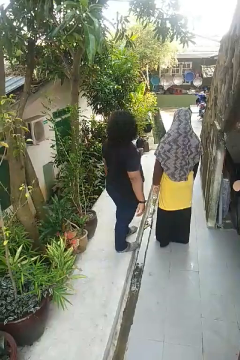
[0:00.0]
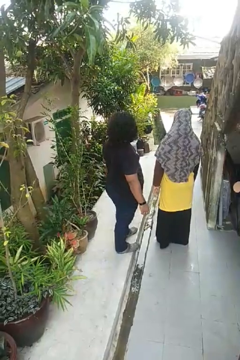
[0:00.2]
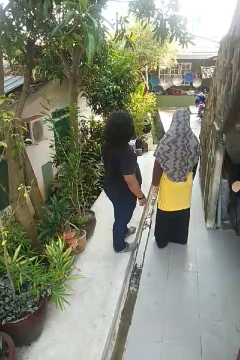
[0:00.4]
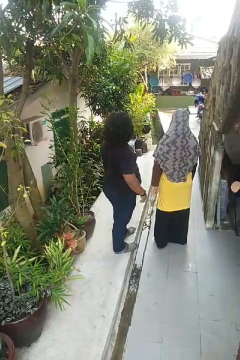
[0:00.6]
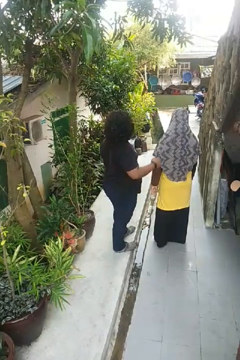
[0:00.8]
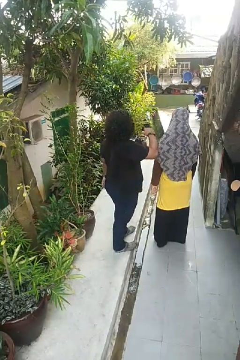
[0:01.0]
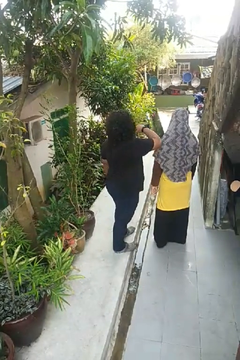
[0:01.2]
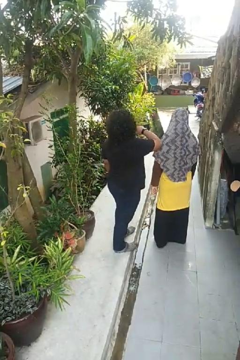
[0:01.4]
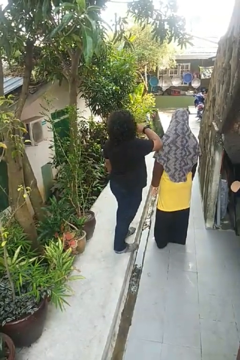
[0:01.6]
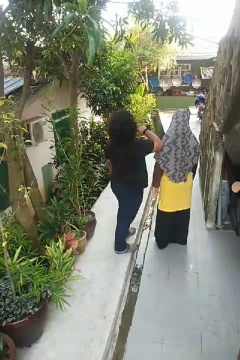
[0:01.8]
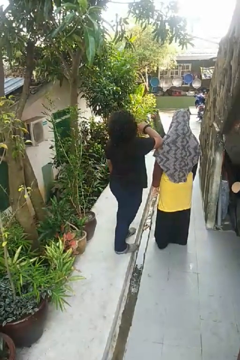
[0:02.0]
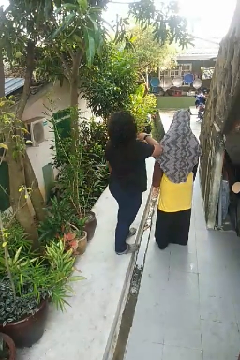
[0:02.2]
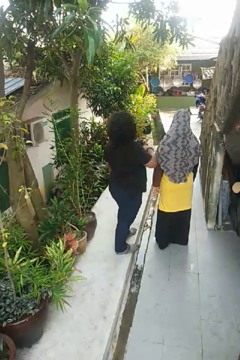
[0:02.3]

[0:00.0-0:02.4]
person nudges person with elbow

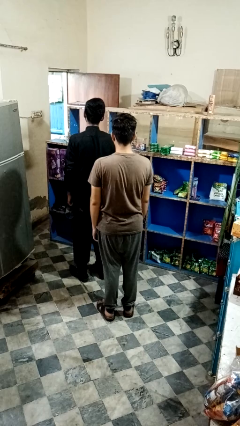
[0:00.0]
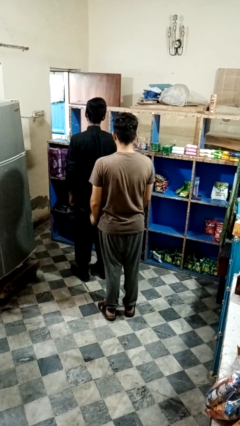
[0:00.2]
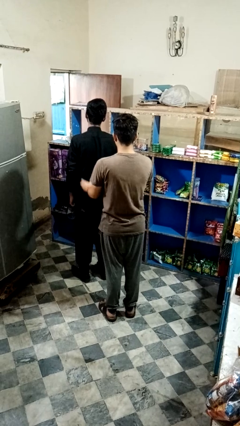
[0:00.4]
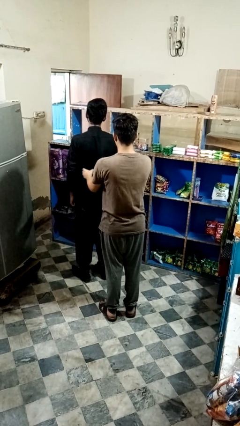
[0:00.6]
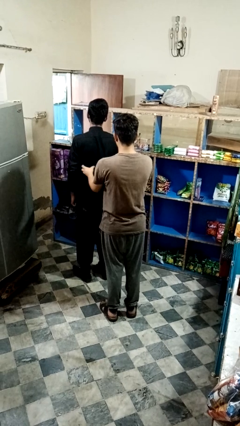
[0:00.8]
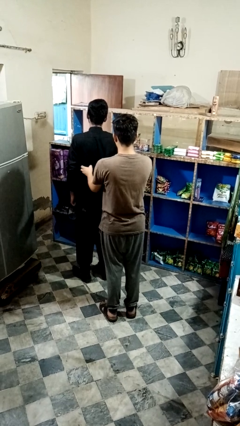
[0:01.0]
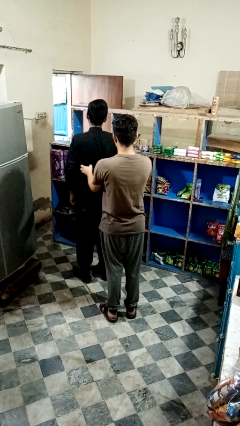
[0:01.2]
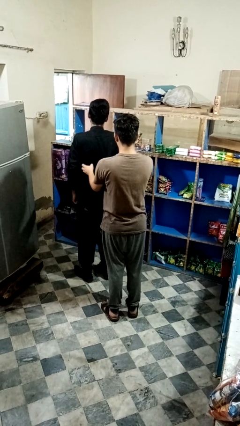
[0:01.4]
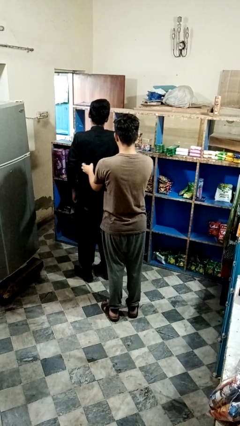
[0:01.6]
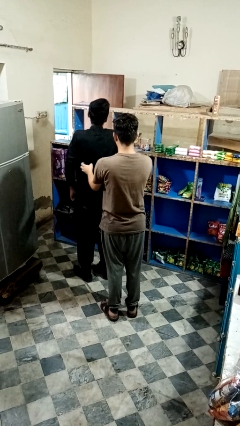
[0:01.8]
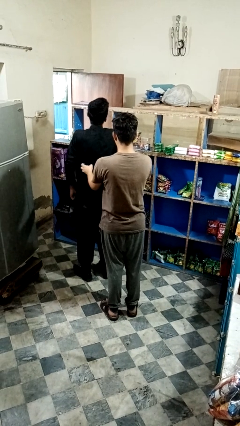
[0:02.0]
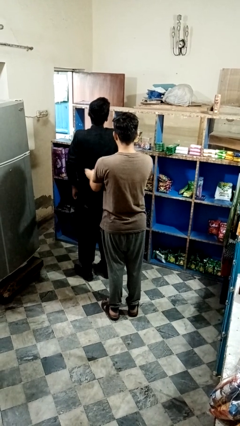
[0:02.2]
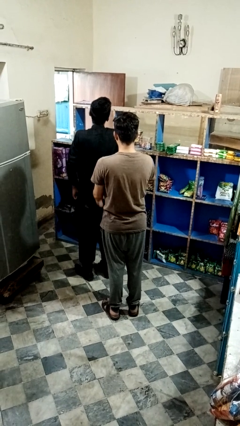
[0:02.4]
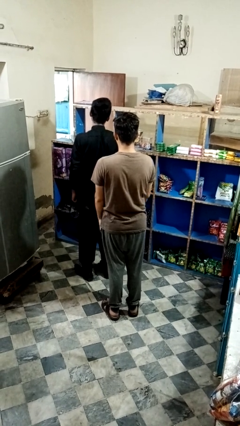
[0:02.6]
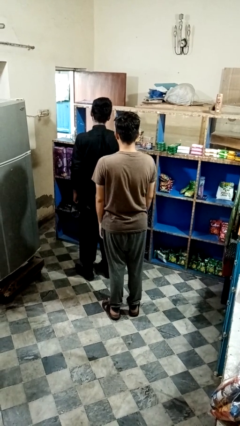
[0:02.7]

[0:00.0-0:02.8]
person tickles person

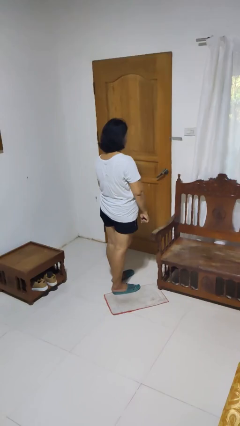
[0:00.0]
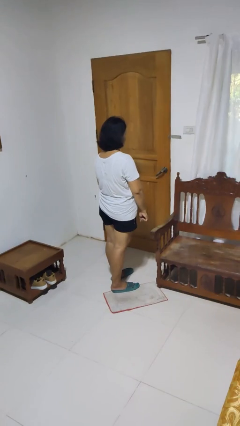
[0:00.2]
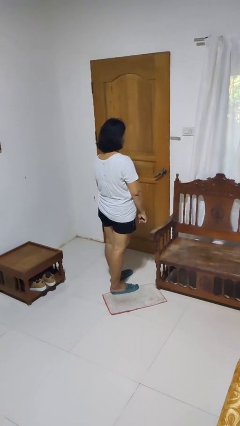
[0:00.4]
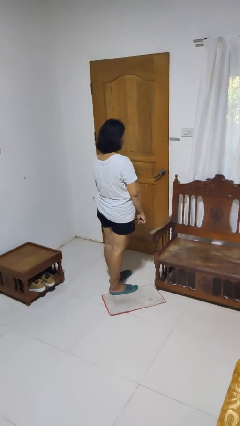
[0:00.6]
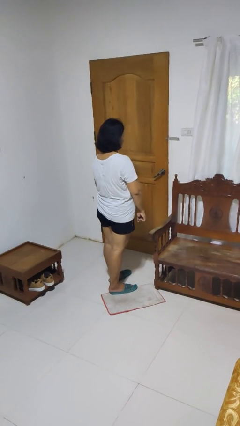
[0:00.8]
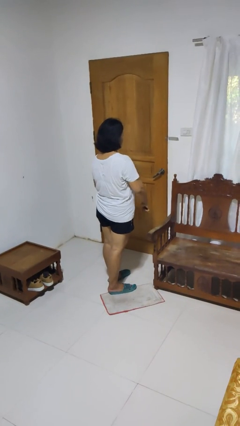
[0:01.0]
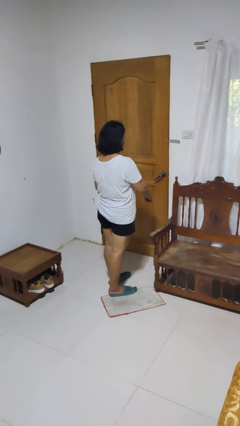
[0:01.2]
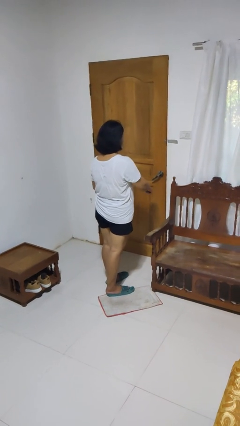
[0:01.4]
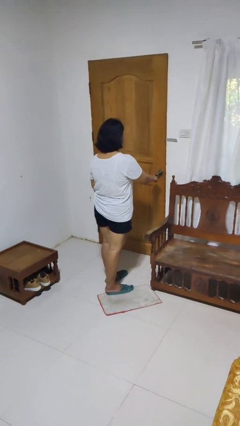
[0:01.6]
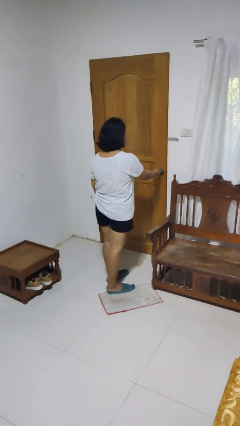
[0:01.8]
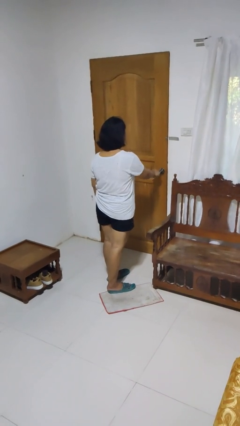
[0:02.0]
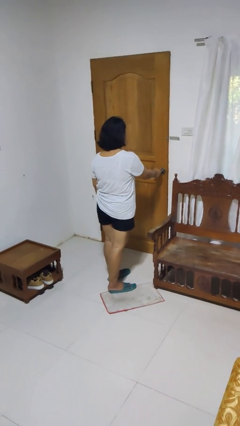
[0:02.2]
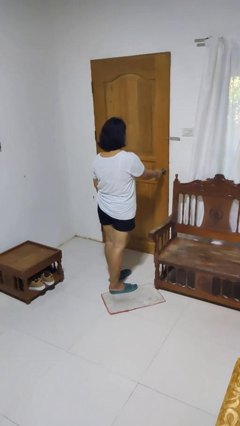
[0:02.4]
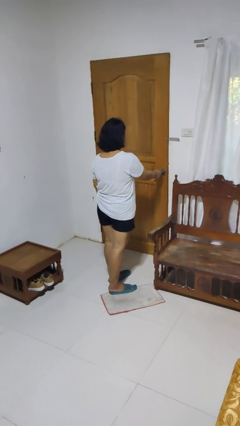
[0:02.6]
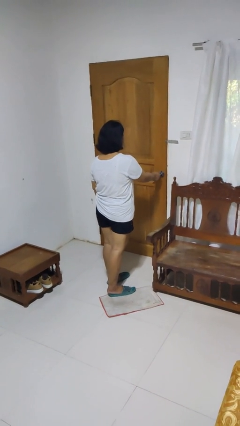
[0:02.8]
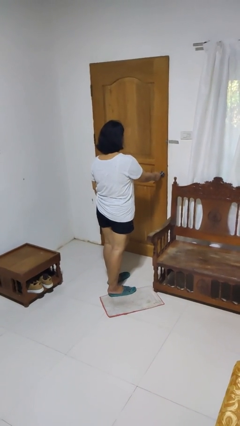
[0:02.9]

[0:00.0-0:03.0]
person unlocks door with keys

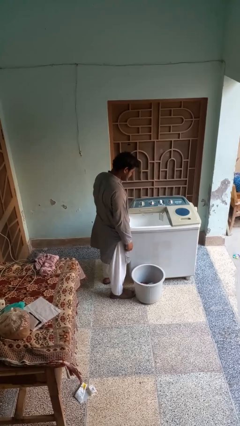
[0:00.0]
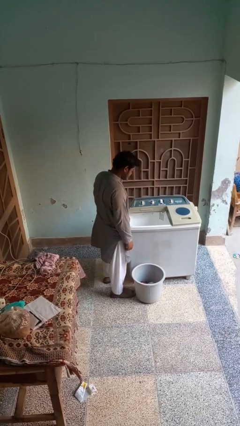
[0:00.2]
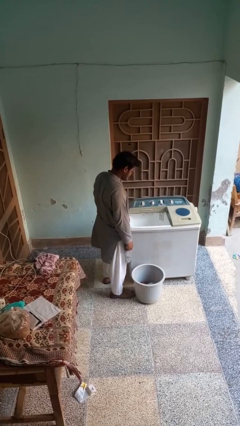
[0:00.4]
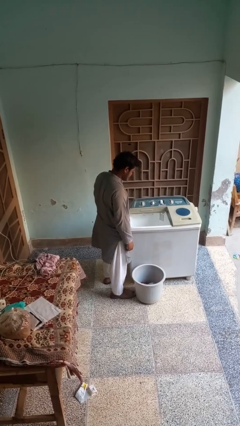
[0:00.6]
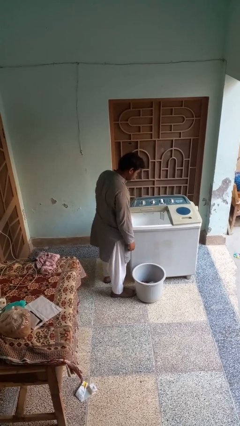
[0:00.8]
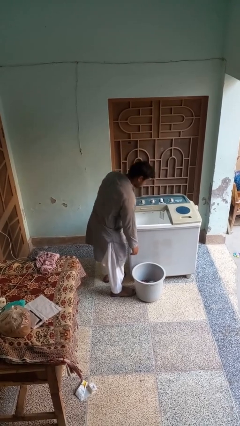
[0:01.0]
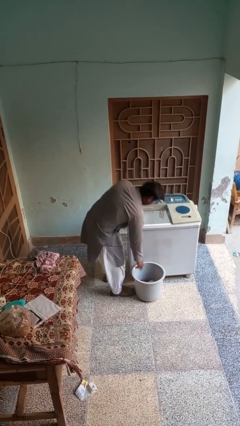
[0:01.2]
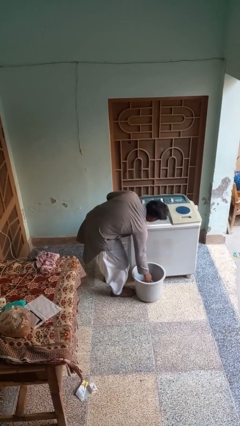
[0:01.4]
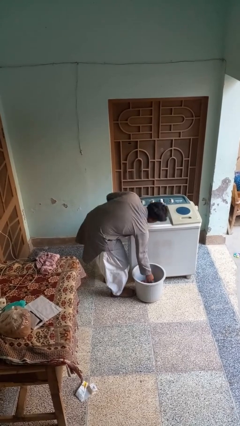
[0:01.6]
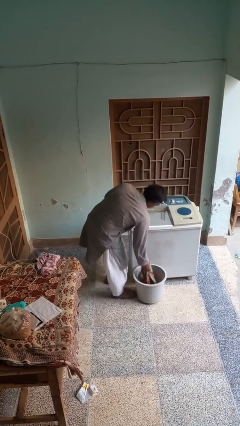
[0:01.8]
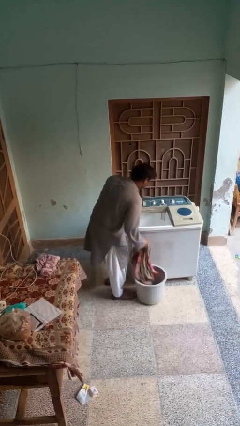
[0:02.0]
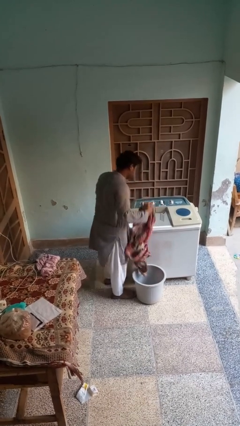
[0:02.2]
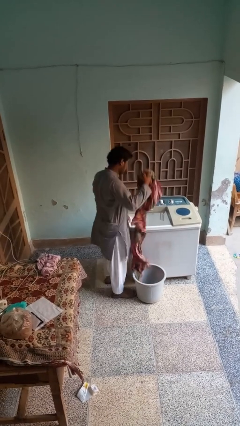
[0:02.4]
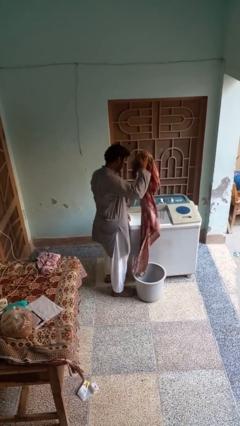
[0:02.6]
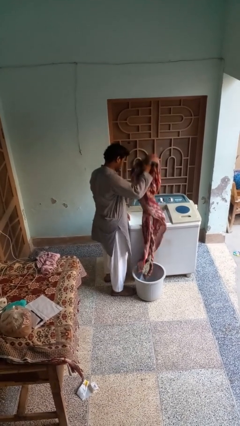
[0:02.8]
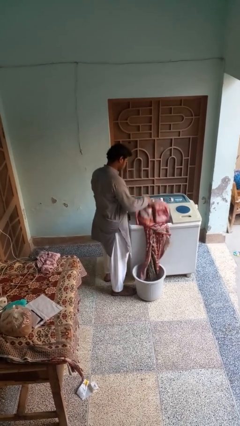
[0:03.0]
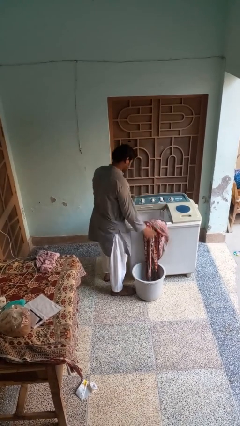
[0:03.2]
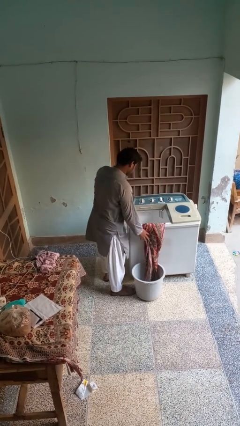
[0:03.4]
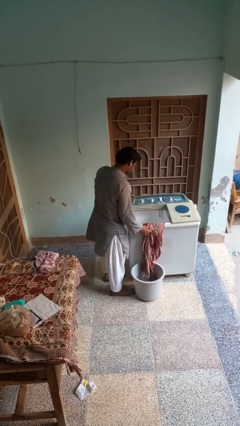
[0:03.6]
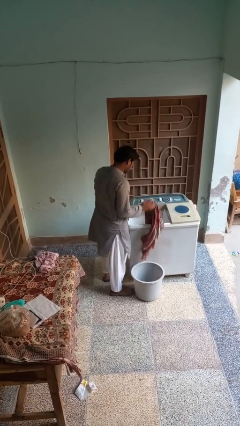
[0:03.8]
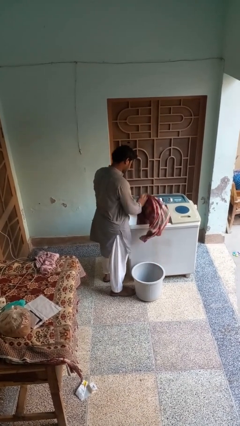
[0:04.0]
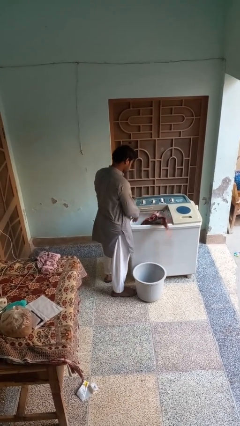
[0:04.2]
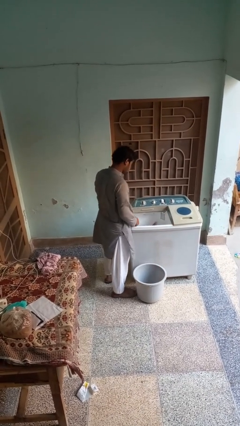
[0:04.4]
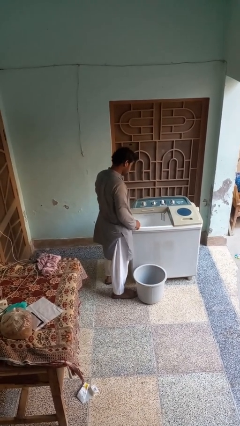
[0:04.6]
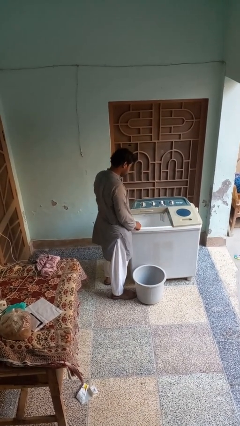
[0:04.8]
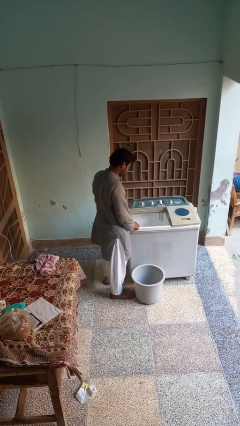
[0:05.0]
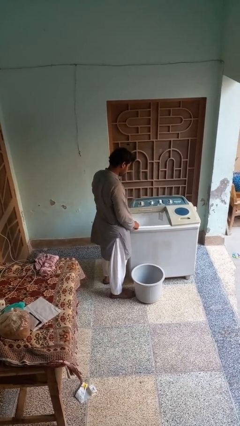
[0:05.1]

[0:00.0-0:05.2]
person loads clotheswasher

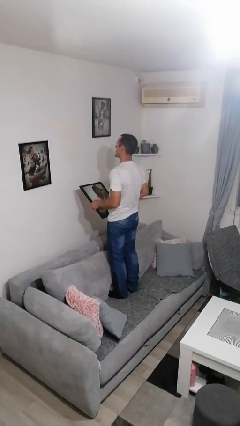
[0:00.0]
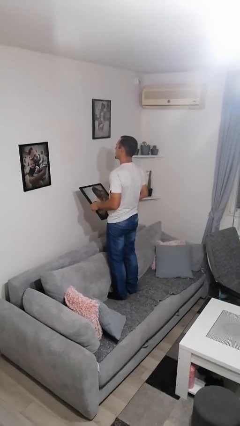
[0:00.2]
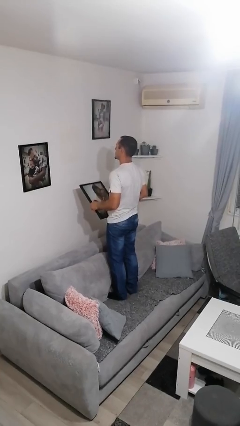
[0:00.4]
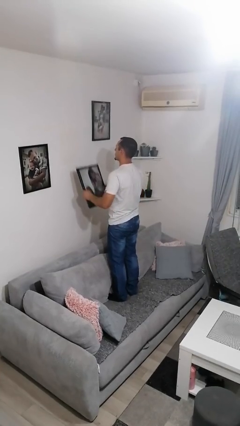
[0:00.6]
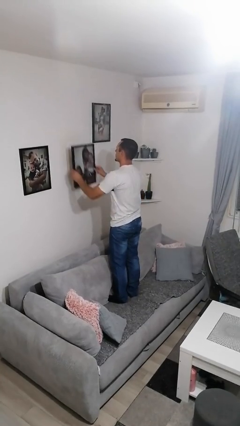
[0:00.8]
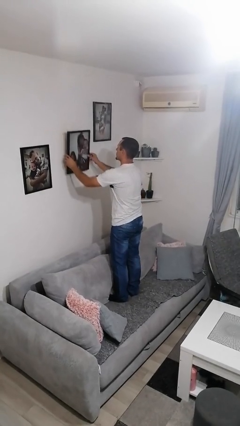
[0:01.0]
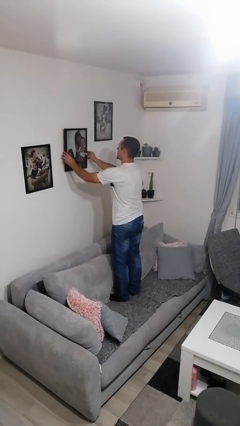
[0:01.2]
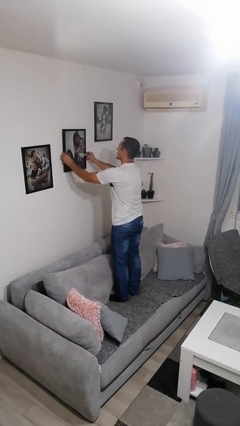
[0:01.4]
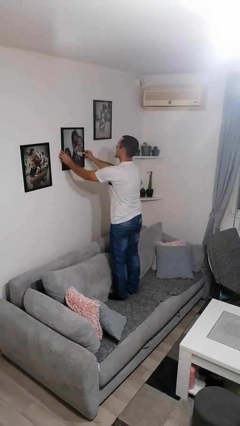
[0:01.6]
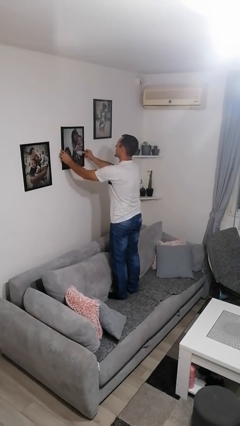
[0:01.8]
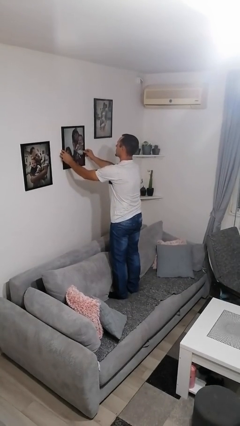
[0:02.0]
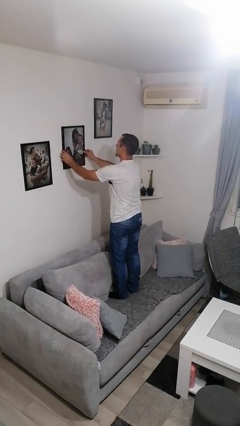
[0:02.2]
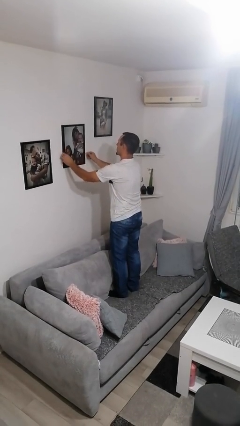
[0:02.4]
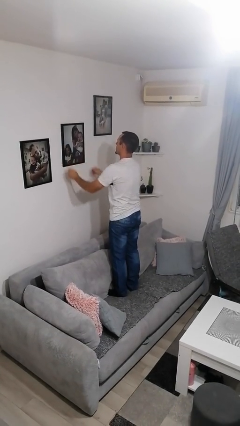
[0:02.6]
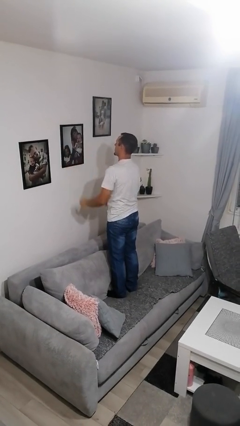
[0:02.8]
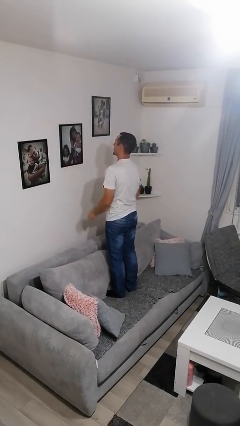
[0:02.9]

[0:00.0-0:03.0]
person puts up picture frame

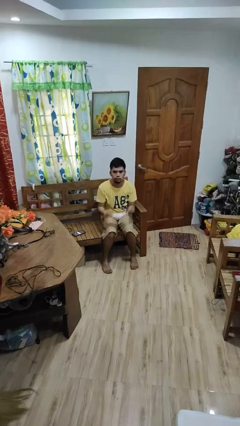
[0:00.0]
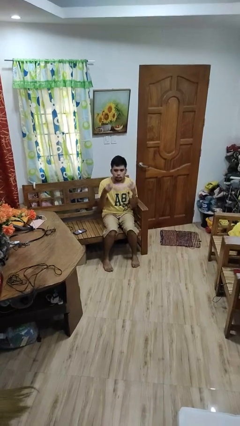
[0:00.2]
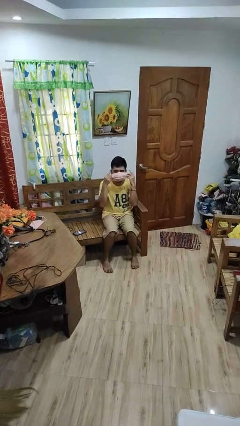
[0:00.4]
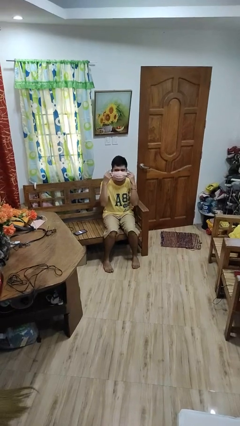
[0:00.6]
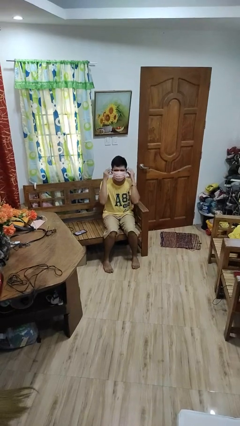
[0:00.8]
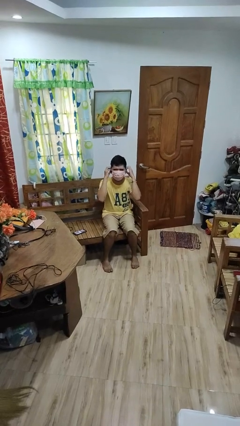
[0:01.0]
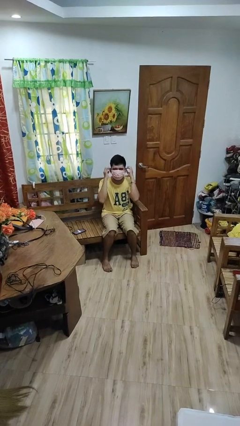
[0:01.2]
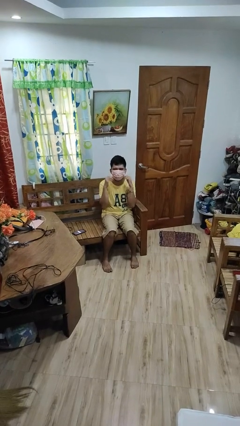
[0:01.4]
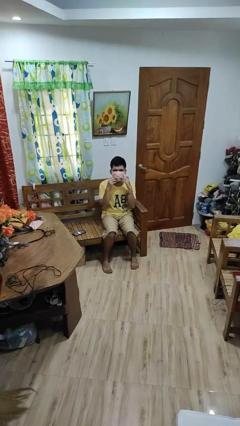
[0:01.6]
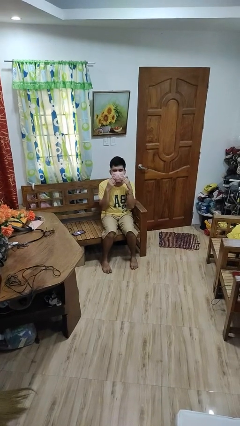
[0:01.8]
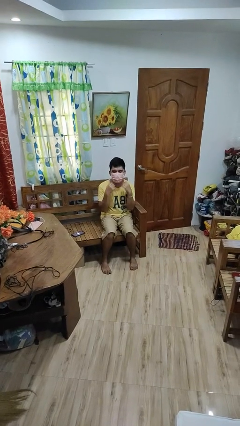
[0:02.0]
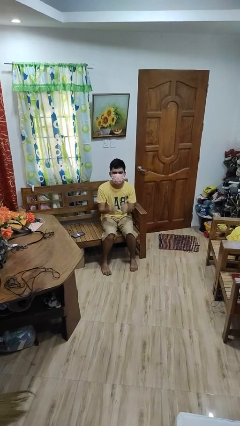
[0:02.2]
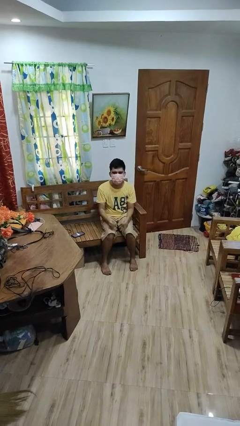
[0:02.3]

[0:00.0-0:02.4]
person puts on facemask
